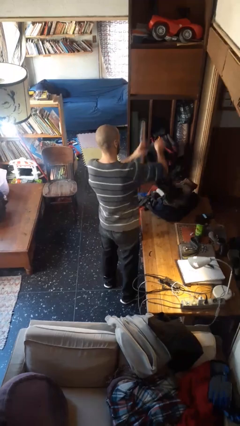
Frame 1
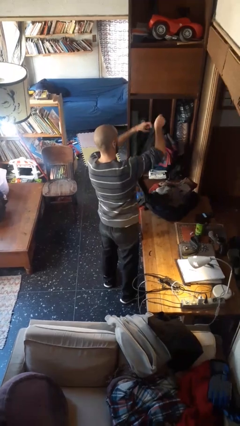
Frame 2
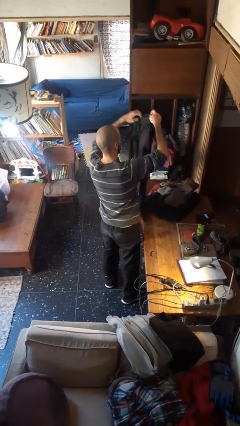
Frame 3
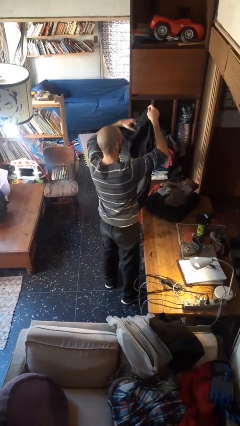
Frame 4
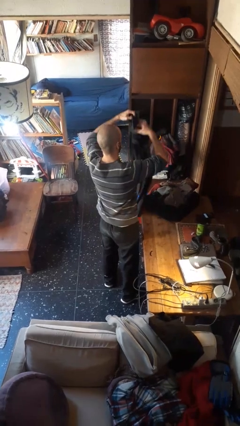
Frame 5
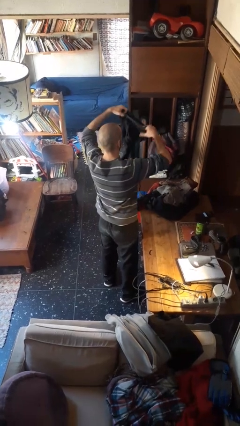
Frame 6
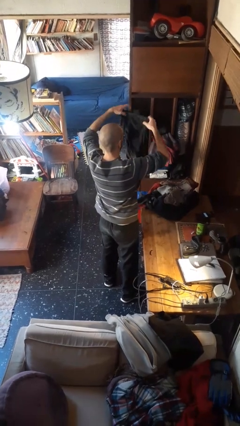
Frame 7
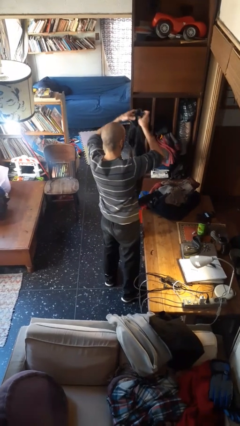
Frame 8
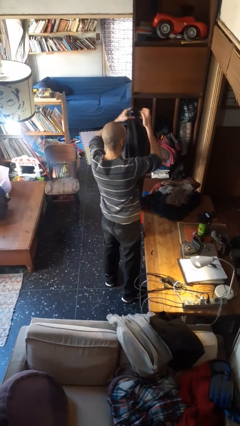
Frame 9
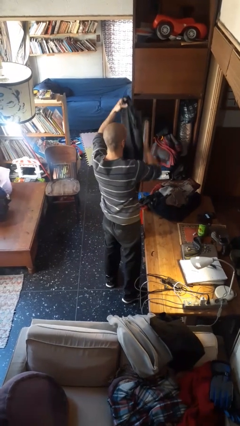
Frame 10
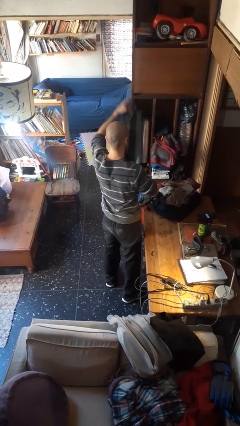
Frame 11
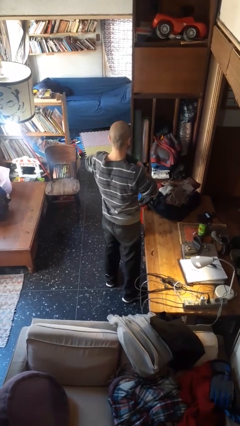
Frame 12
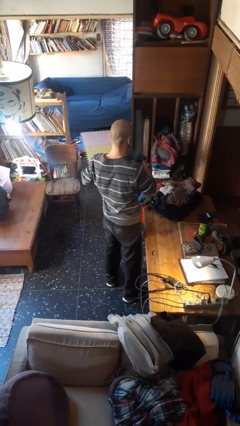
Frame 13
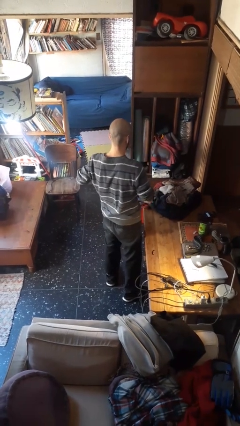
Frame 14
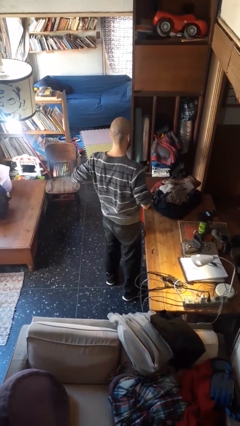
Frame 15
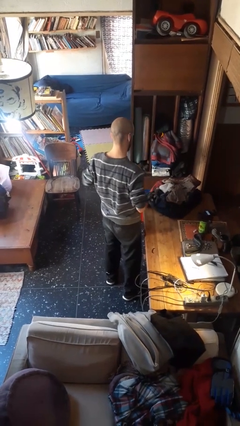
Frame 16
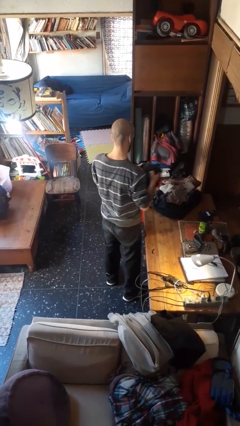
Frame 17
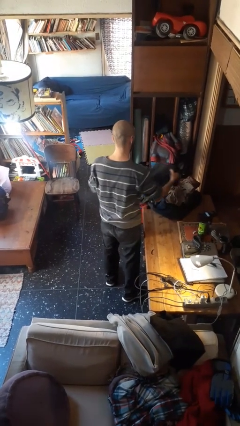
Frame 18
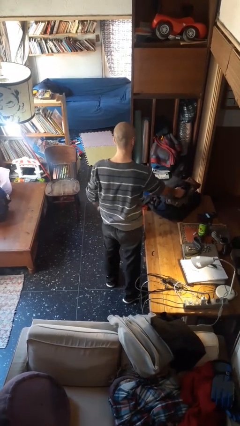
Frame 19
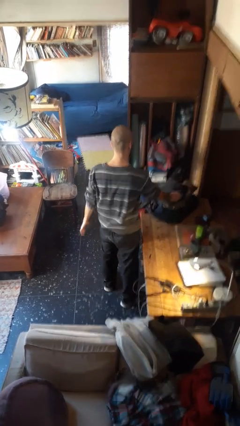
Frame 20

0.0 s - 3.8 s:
person folds pants

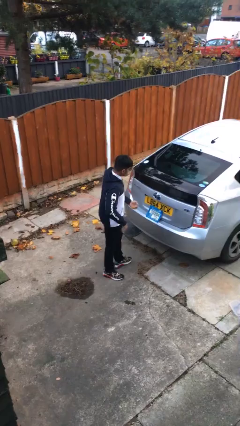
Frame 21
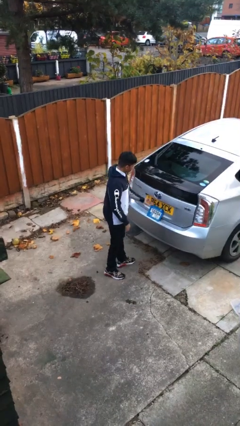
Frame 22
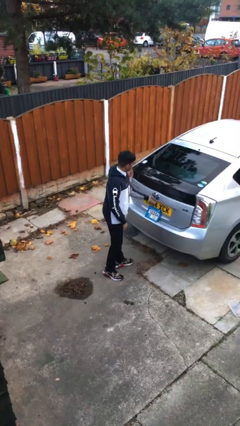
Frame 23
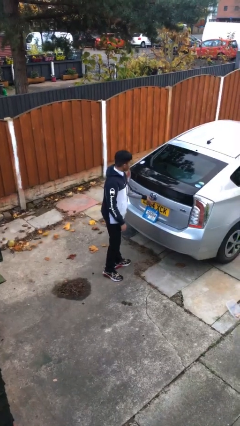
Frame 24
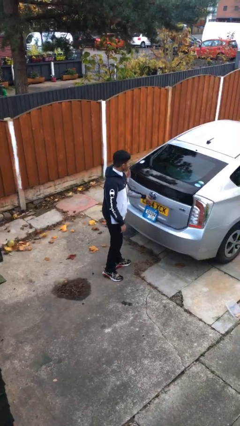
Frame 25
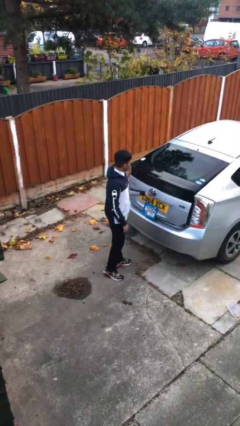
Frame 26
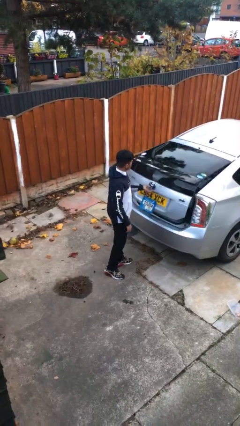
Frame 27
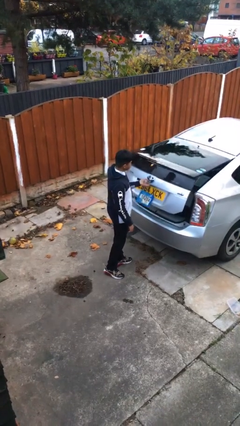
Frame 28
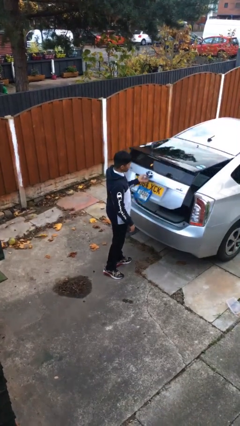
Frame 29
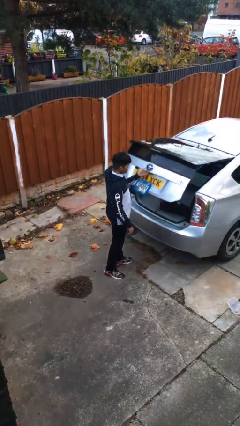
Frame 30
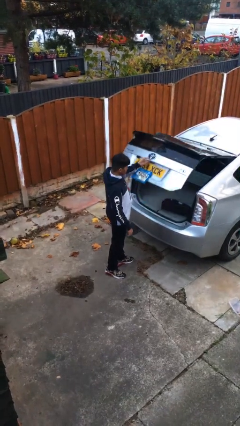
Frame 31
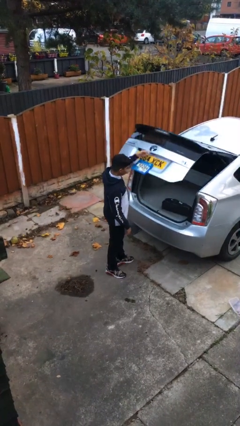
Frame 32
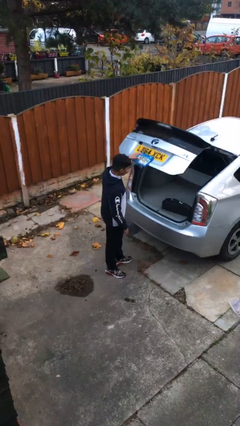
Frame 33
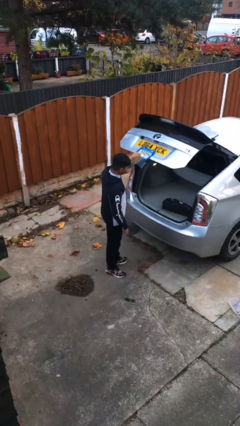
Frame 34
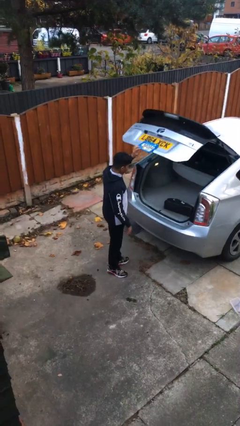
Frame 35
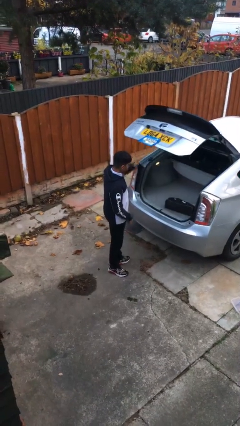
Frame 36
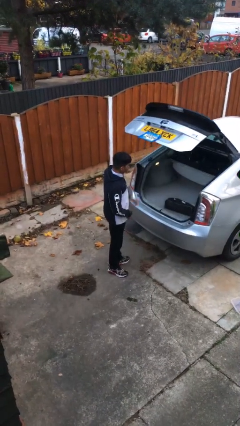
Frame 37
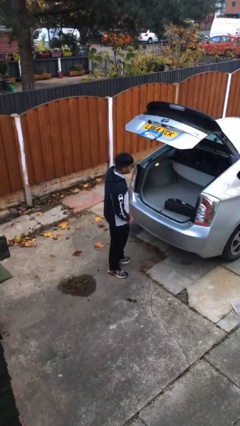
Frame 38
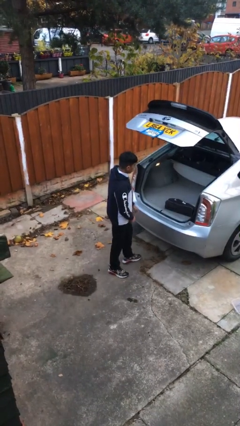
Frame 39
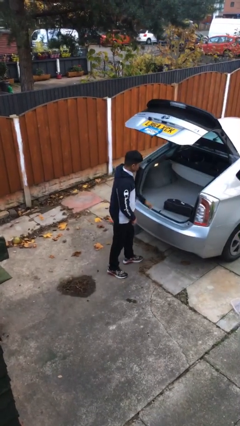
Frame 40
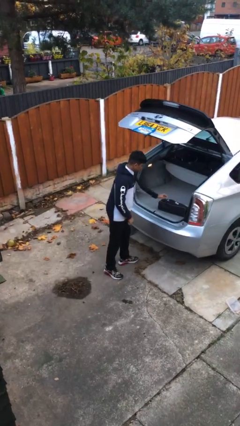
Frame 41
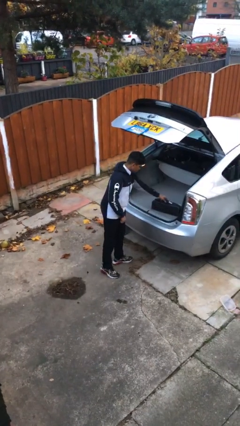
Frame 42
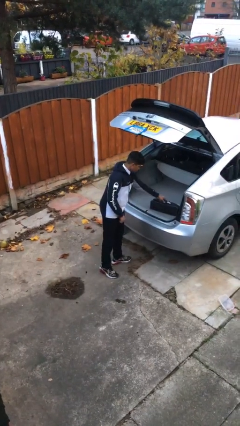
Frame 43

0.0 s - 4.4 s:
person opens car trunk

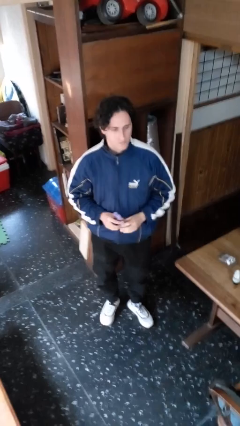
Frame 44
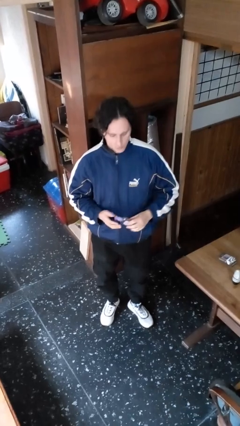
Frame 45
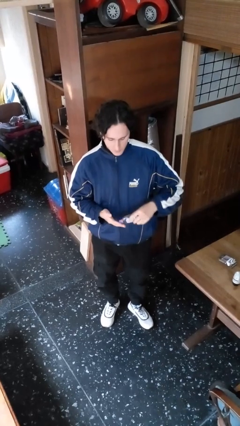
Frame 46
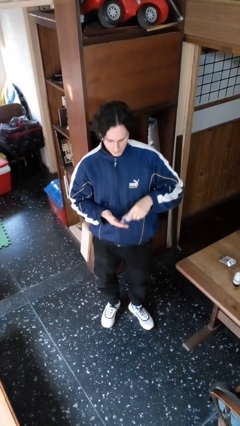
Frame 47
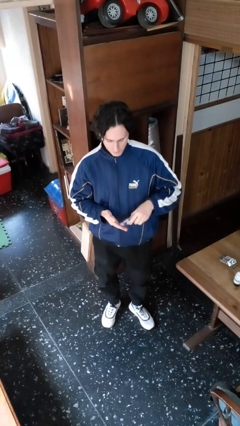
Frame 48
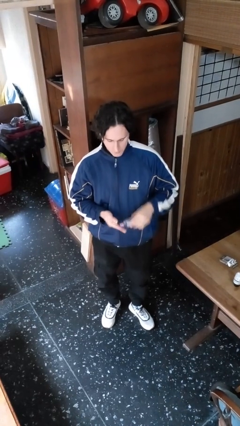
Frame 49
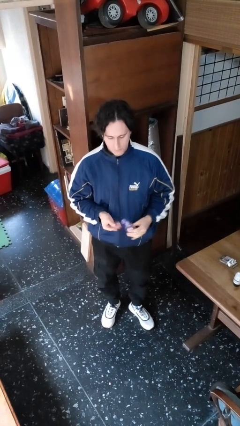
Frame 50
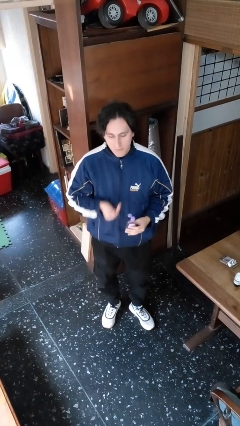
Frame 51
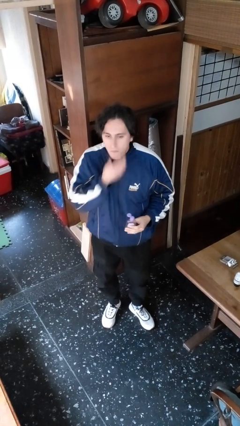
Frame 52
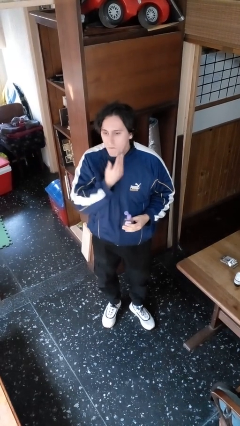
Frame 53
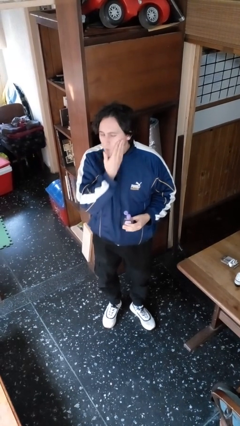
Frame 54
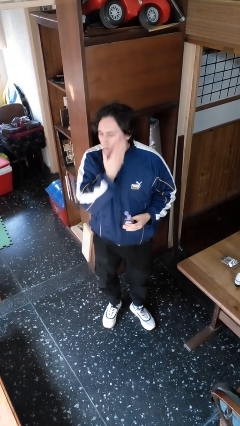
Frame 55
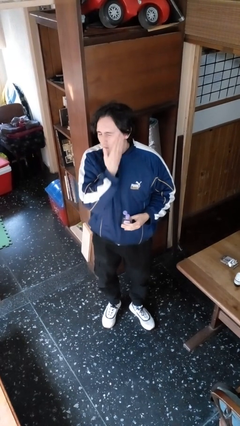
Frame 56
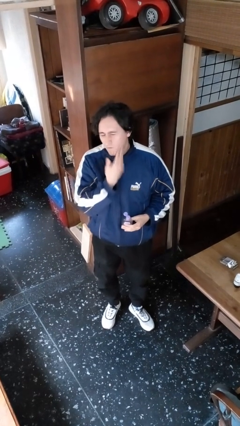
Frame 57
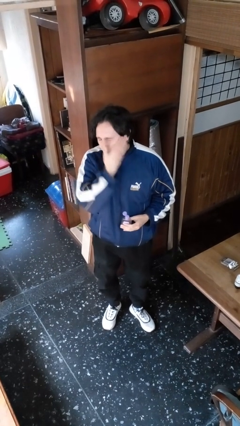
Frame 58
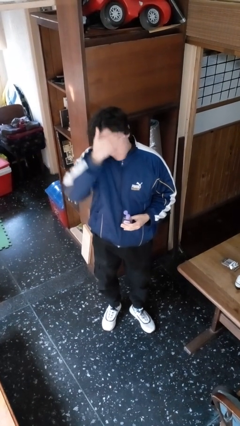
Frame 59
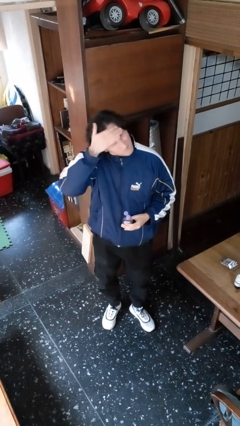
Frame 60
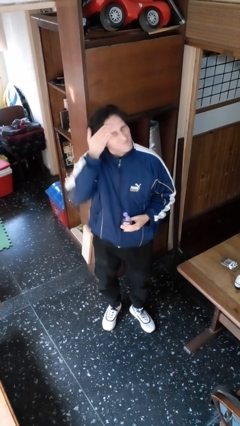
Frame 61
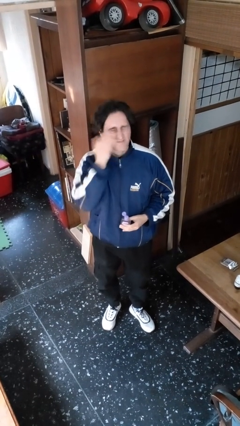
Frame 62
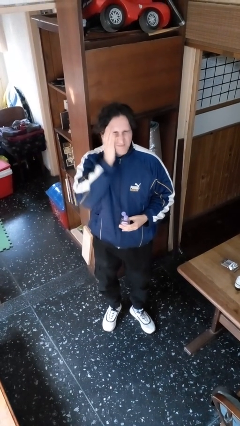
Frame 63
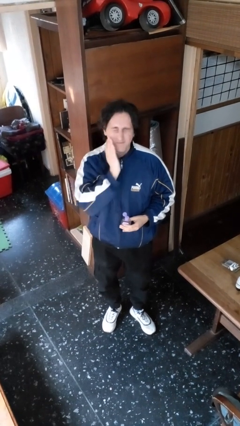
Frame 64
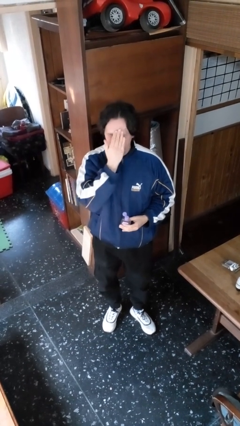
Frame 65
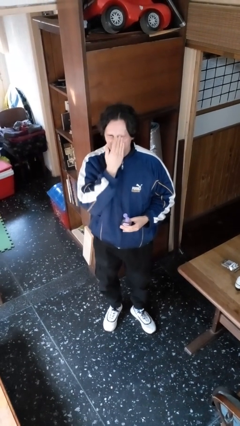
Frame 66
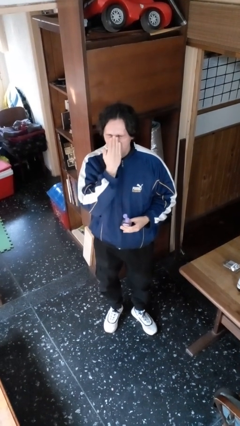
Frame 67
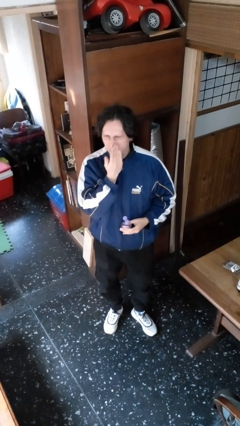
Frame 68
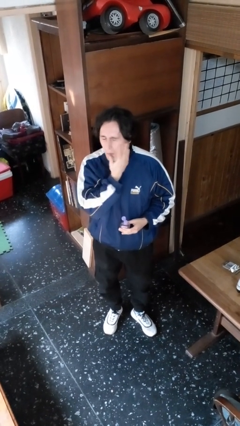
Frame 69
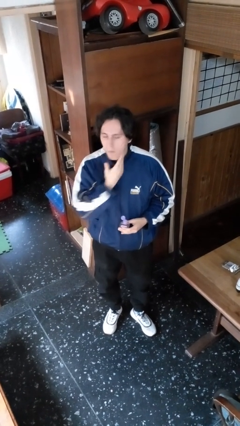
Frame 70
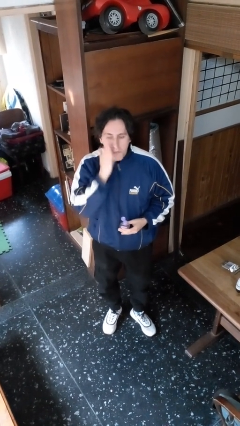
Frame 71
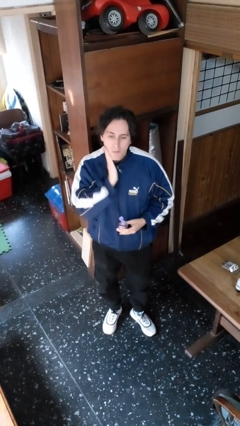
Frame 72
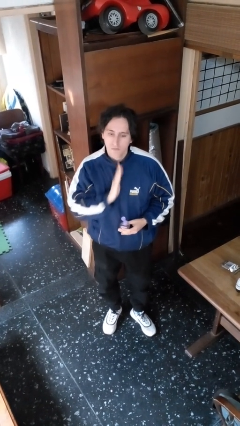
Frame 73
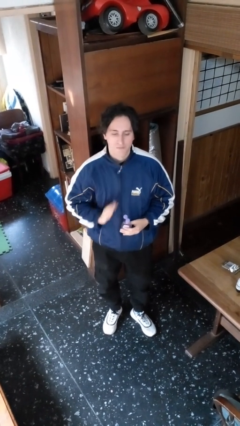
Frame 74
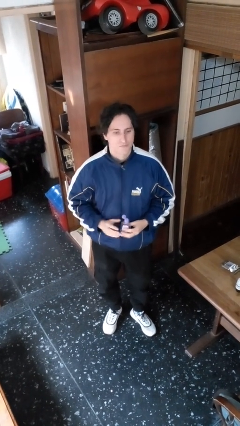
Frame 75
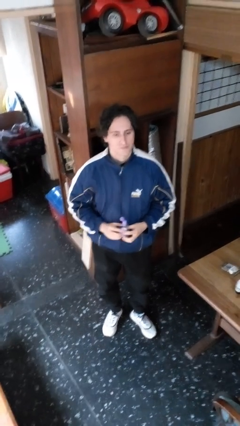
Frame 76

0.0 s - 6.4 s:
person applies facial moisturizer

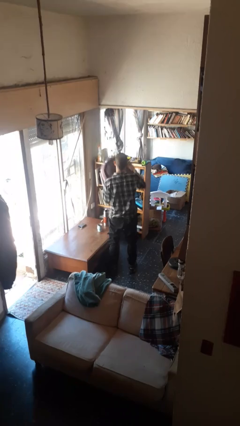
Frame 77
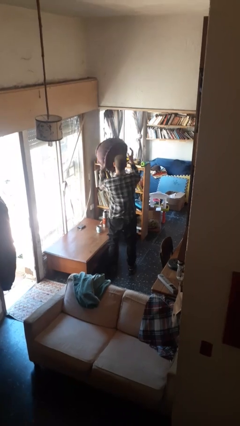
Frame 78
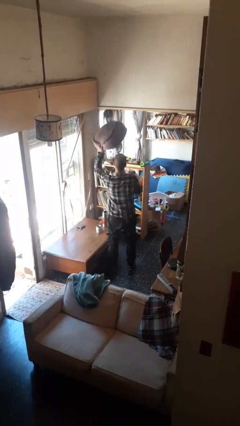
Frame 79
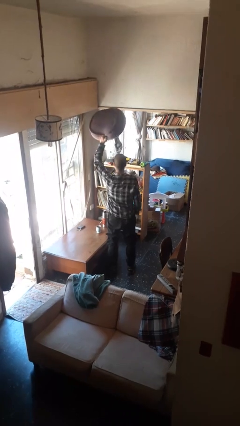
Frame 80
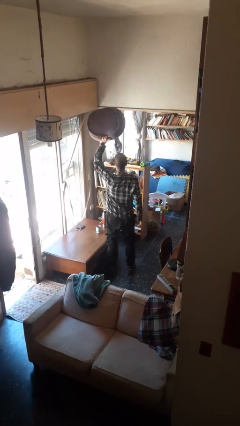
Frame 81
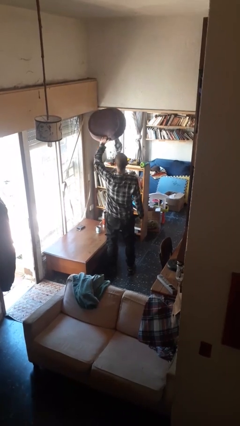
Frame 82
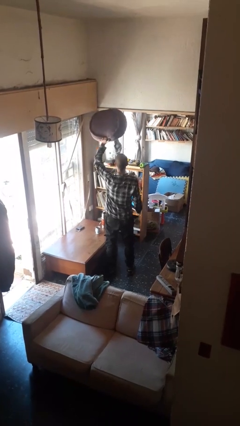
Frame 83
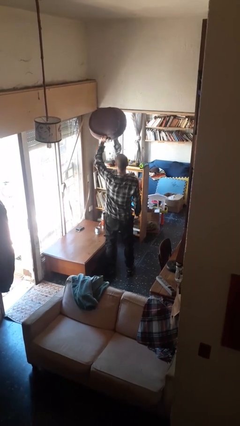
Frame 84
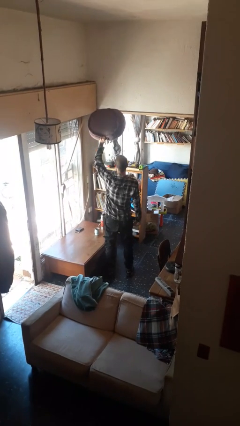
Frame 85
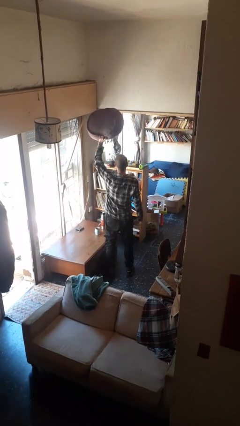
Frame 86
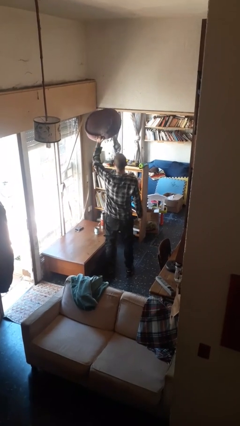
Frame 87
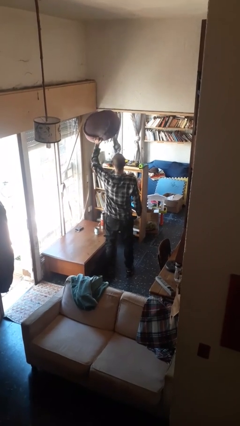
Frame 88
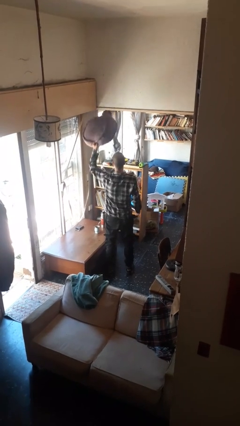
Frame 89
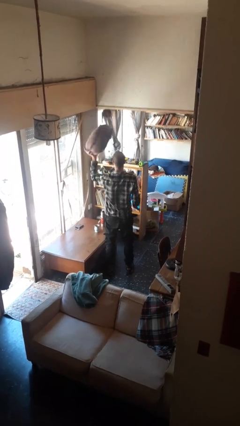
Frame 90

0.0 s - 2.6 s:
person holds object above head

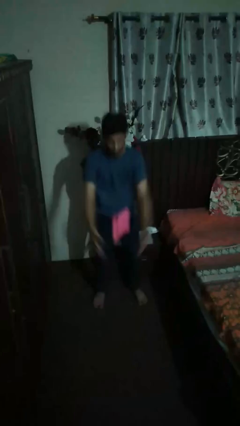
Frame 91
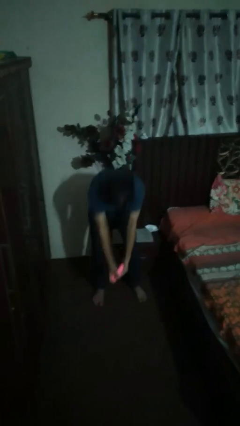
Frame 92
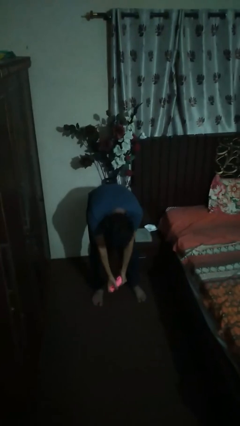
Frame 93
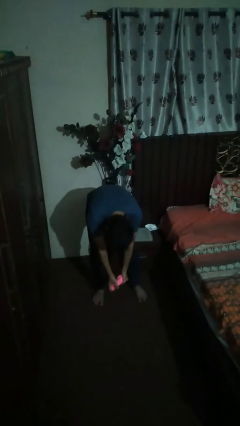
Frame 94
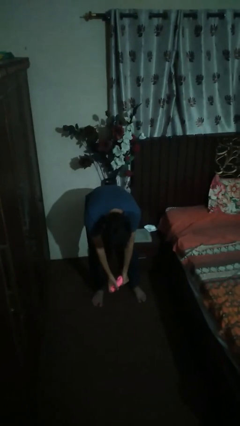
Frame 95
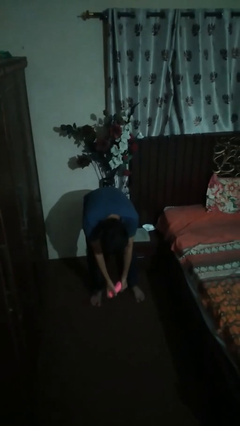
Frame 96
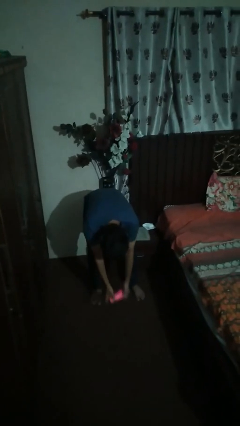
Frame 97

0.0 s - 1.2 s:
person catches dropped object
